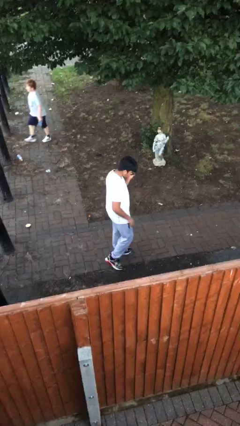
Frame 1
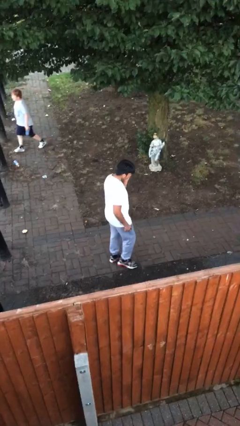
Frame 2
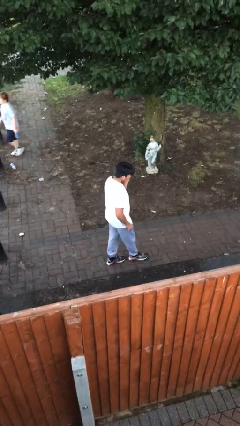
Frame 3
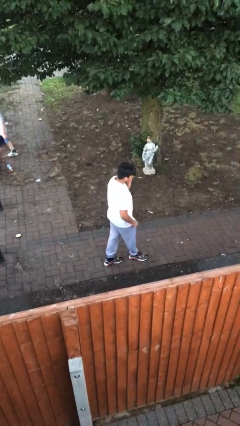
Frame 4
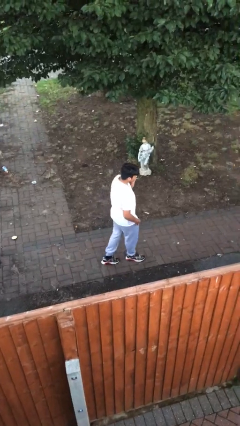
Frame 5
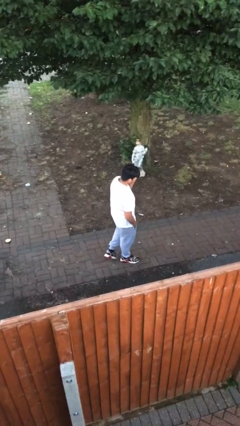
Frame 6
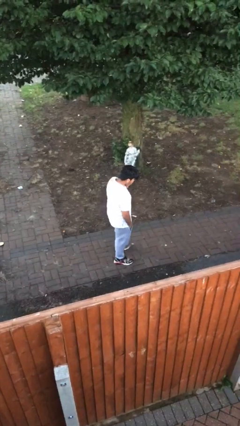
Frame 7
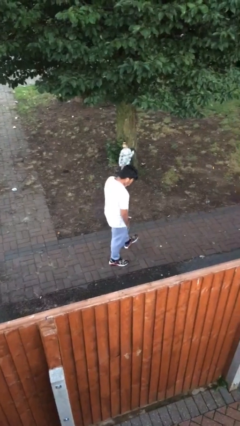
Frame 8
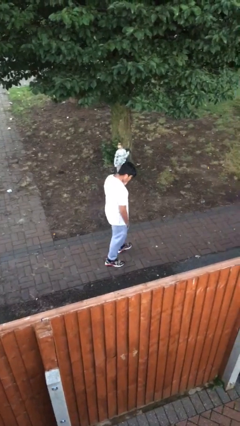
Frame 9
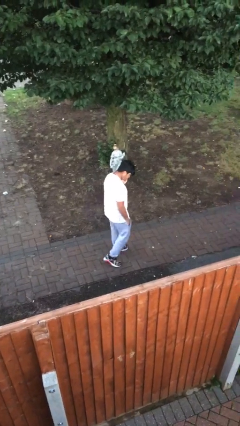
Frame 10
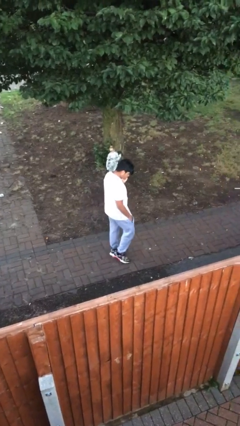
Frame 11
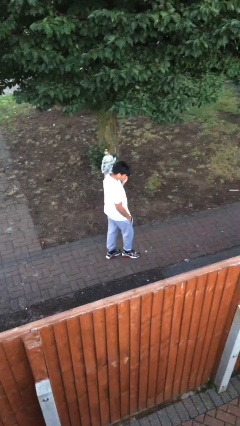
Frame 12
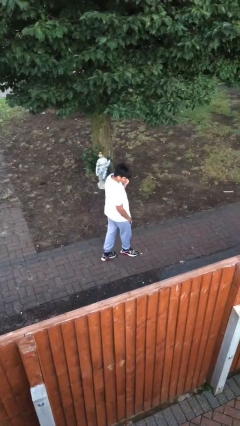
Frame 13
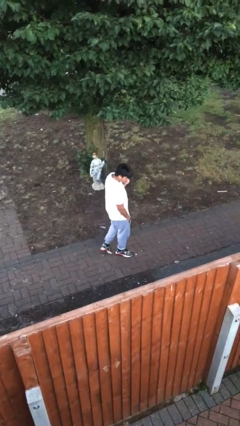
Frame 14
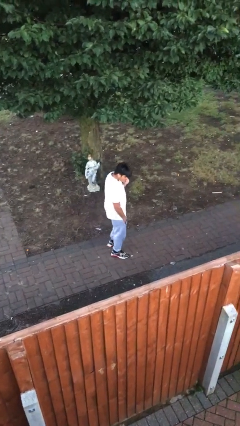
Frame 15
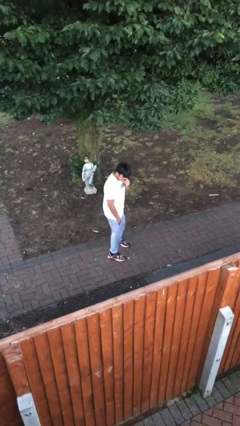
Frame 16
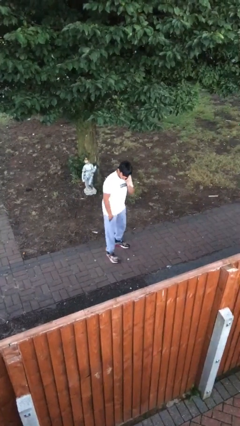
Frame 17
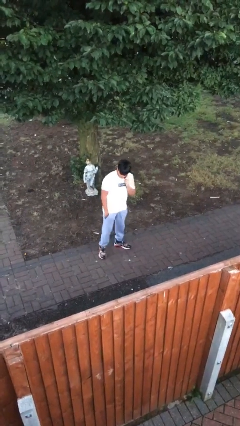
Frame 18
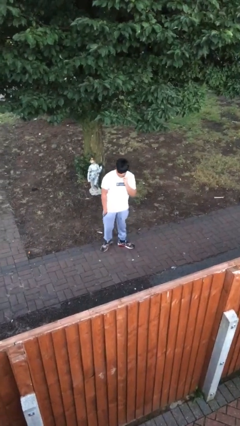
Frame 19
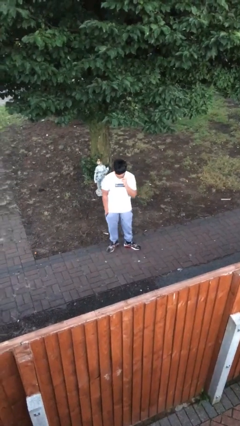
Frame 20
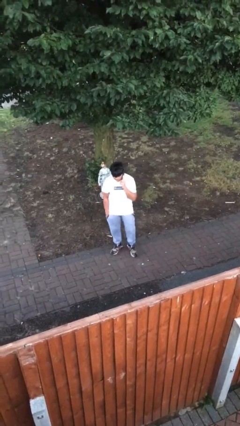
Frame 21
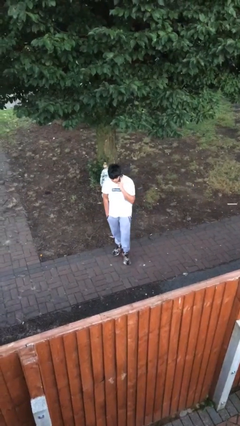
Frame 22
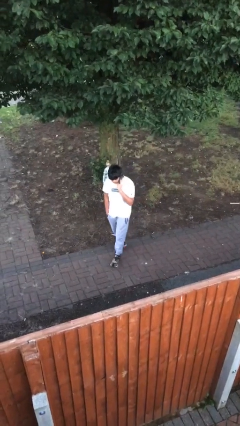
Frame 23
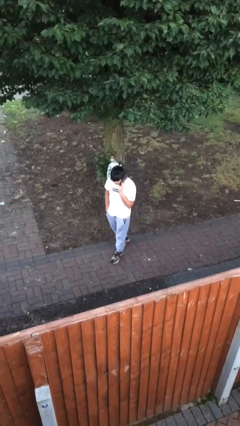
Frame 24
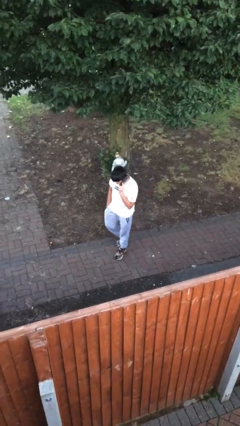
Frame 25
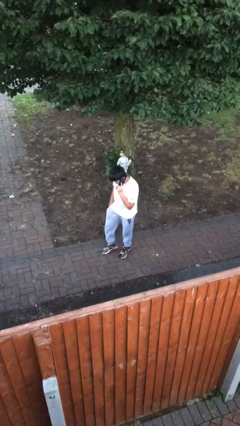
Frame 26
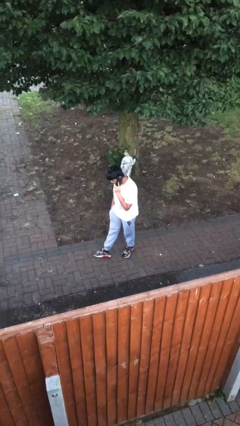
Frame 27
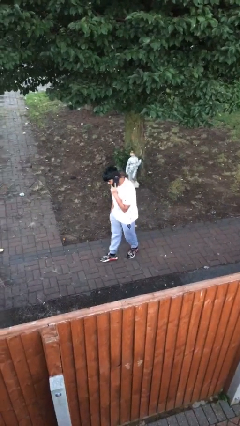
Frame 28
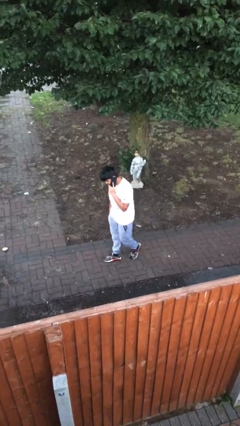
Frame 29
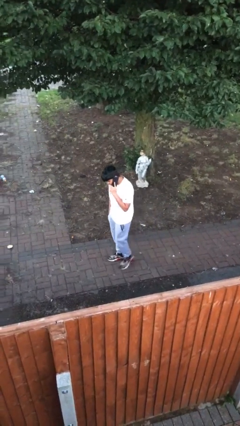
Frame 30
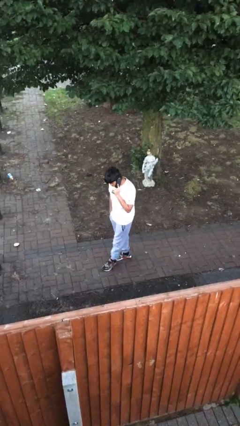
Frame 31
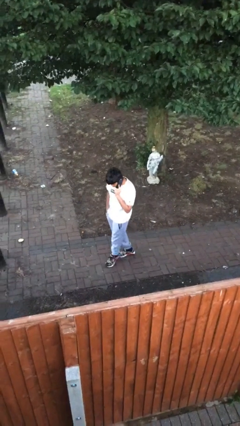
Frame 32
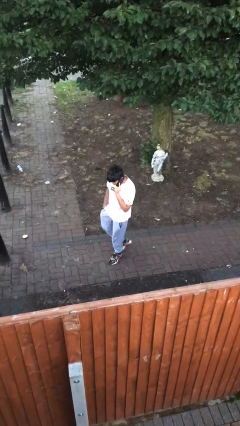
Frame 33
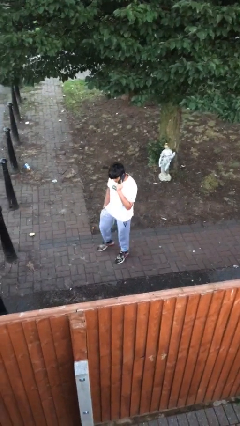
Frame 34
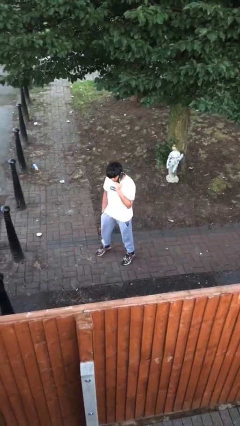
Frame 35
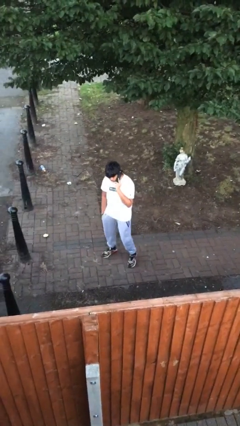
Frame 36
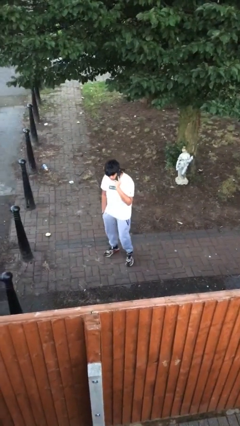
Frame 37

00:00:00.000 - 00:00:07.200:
person talks on phone

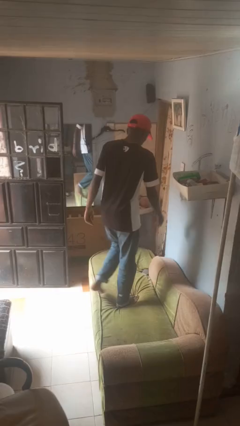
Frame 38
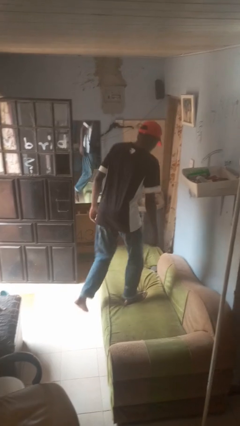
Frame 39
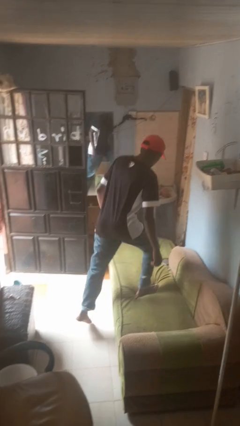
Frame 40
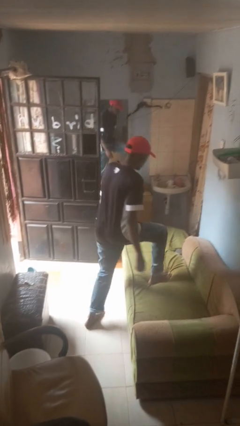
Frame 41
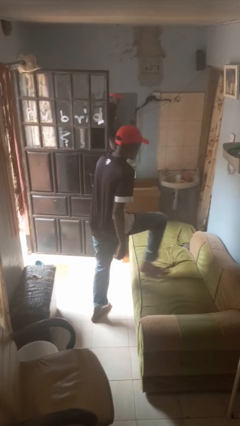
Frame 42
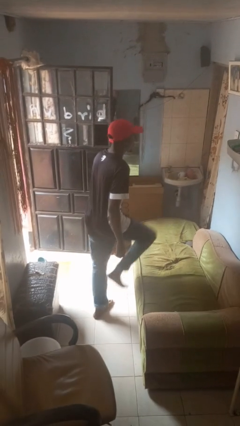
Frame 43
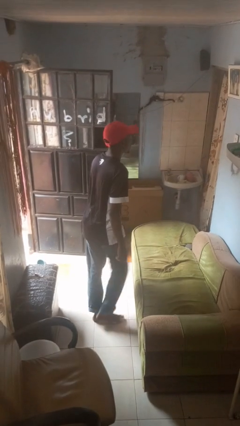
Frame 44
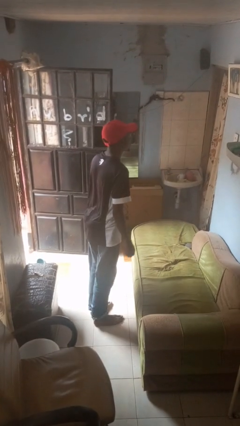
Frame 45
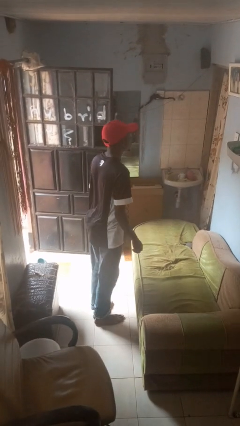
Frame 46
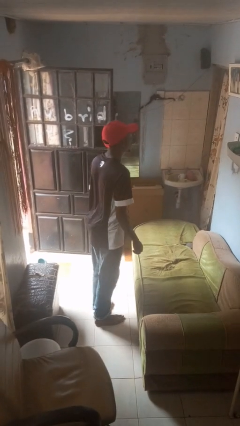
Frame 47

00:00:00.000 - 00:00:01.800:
person climbs off couch

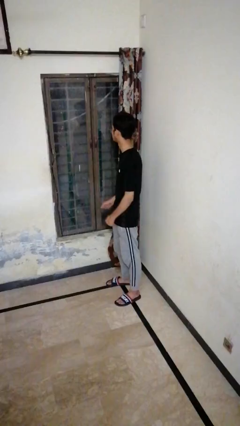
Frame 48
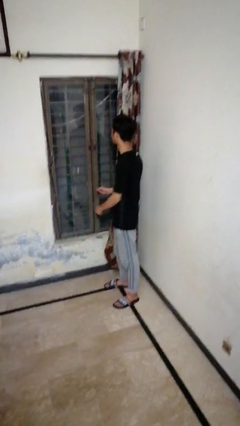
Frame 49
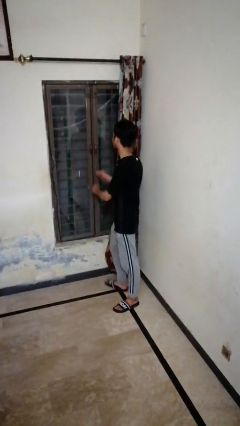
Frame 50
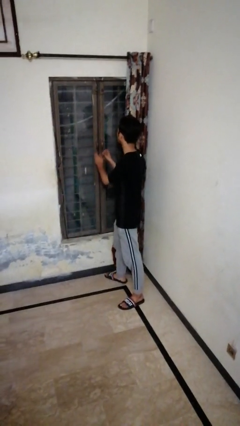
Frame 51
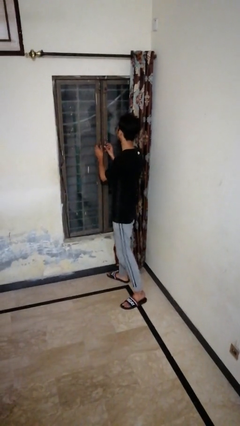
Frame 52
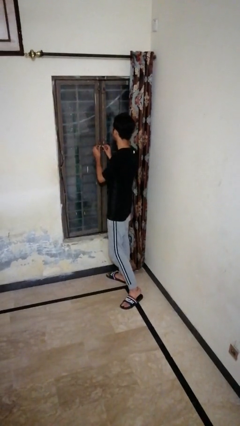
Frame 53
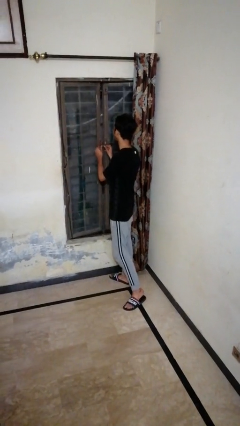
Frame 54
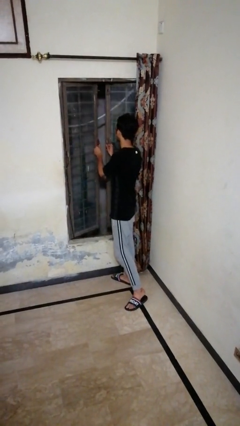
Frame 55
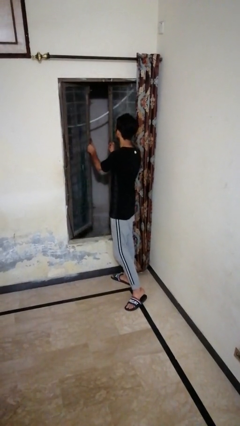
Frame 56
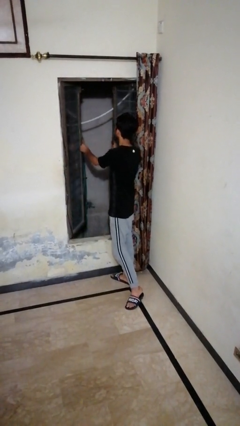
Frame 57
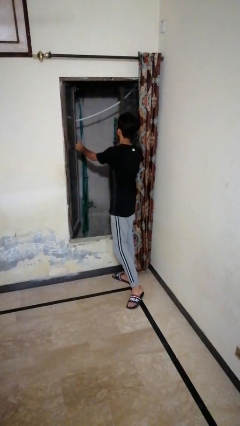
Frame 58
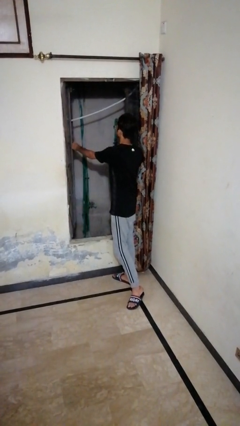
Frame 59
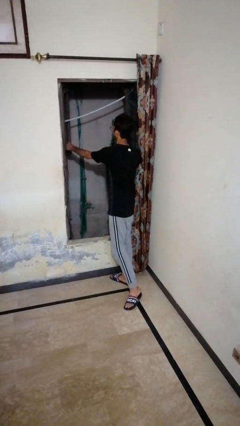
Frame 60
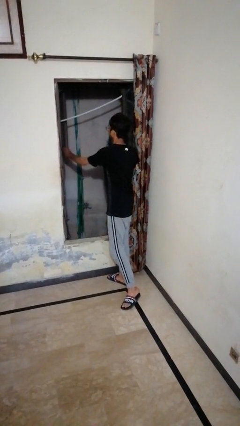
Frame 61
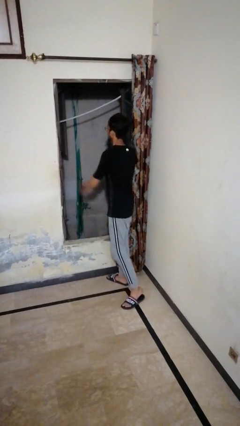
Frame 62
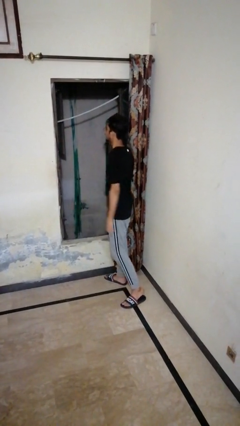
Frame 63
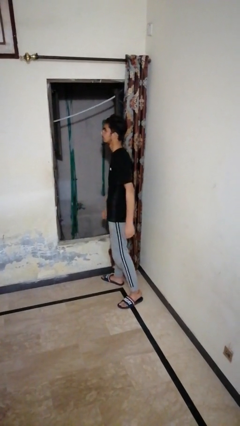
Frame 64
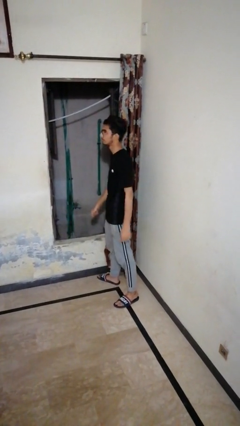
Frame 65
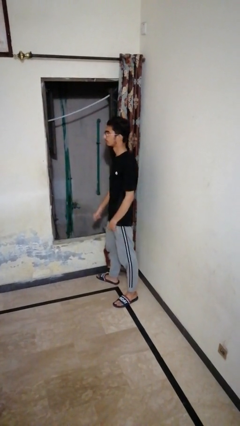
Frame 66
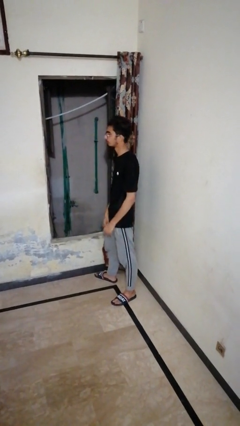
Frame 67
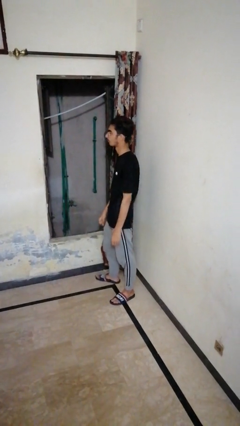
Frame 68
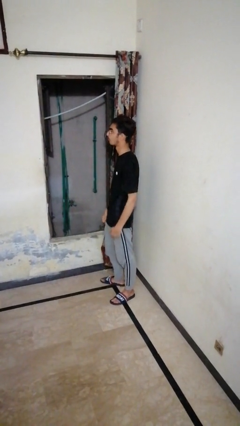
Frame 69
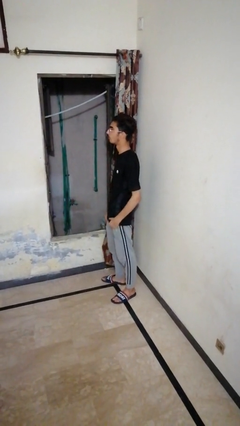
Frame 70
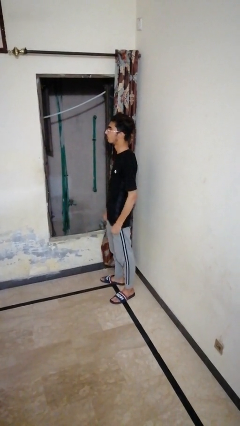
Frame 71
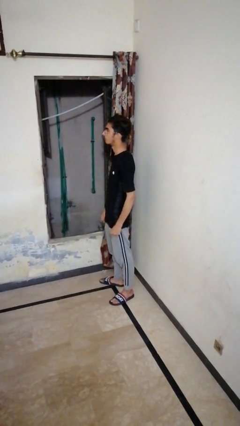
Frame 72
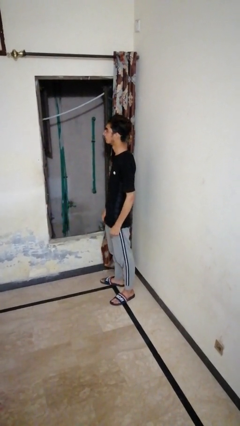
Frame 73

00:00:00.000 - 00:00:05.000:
person opens home window

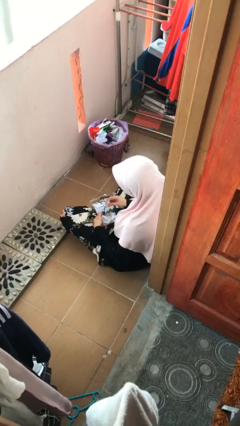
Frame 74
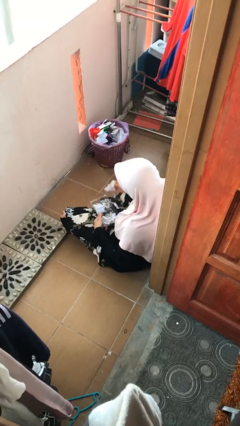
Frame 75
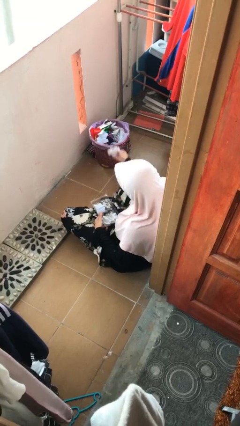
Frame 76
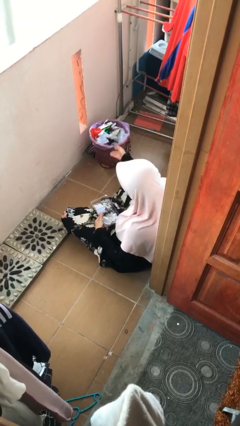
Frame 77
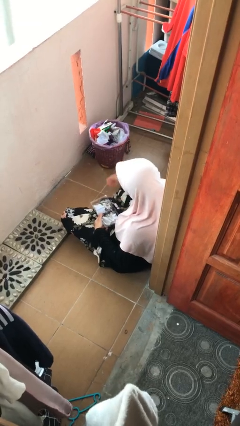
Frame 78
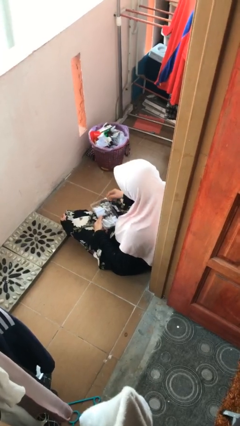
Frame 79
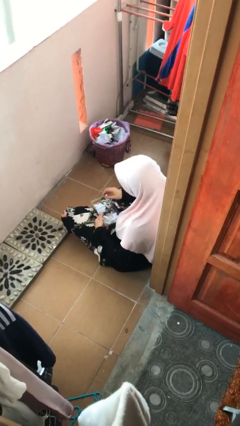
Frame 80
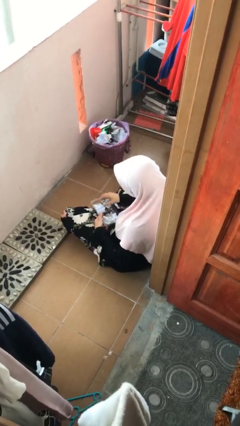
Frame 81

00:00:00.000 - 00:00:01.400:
person discards trash

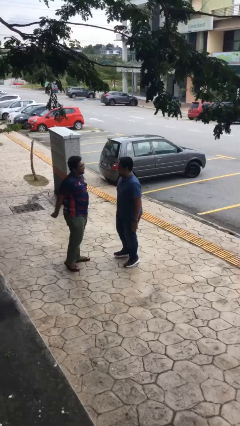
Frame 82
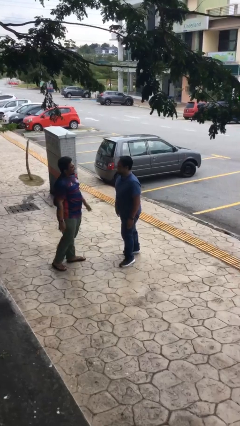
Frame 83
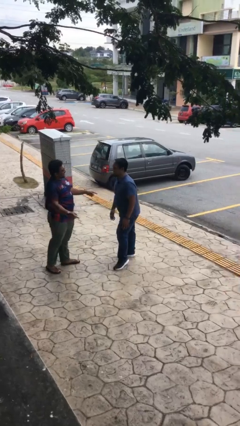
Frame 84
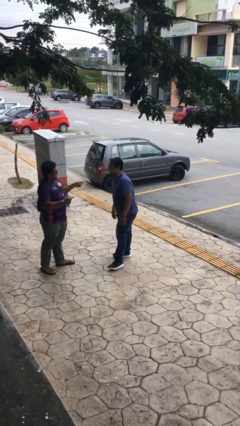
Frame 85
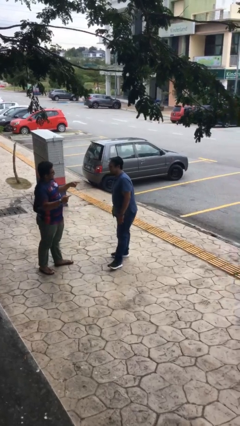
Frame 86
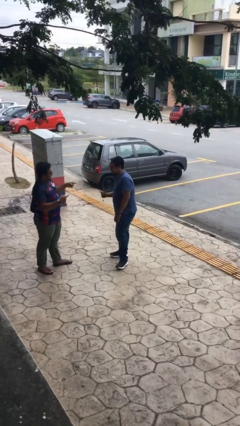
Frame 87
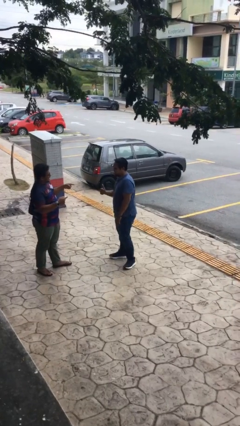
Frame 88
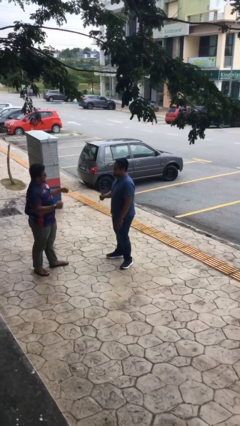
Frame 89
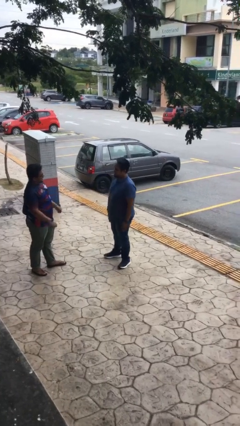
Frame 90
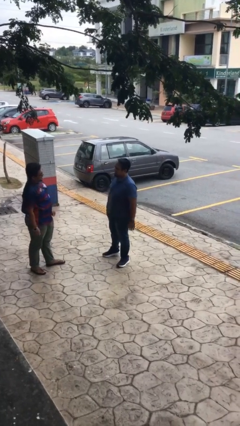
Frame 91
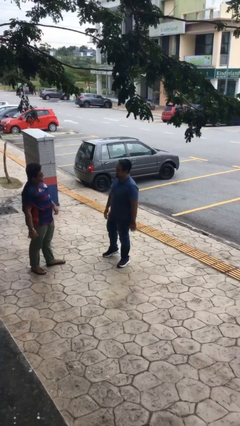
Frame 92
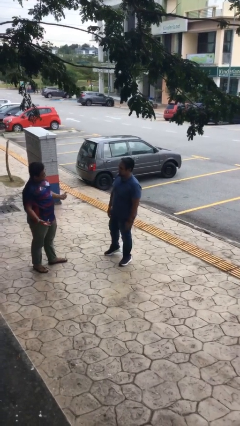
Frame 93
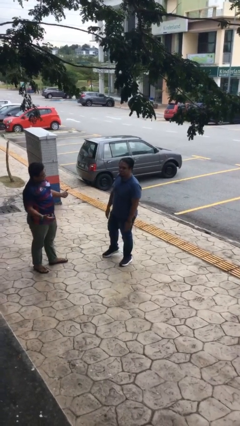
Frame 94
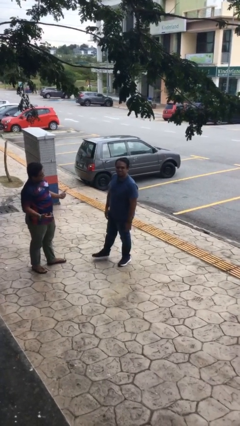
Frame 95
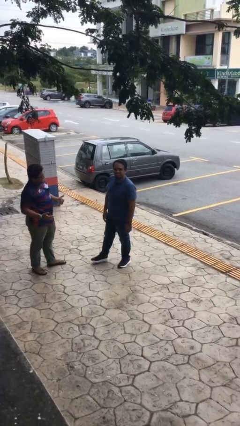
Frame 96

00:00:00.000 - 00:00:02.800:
person talks to person
